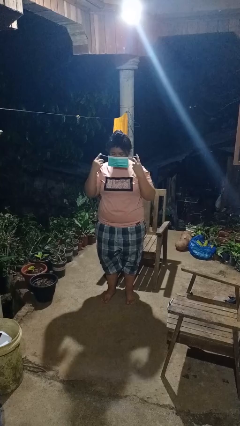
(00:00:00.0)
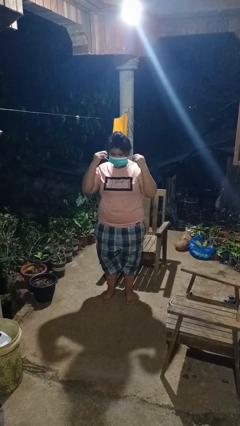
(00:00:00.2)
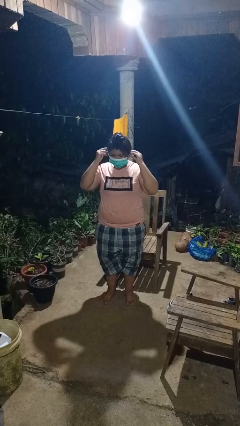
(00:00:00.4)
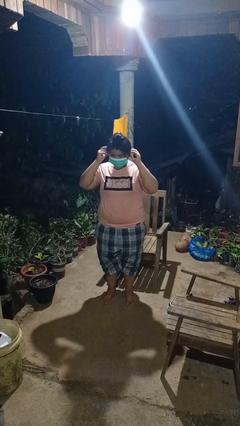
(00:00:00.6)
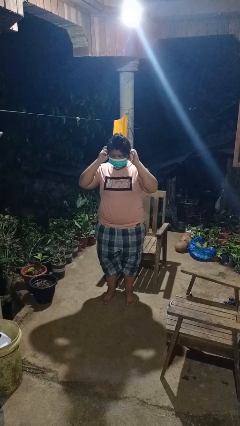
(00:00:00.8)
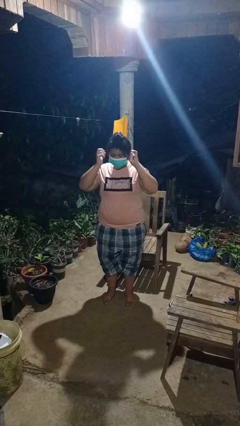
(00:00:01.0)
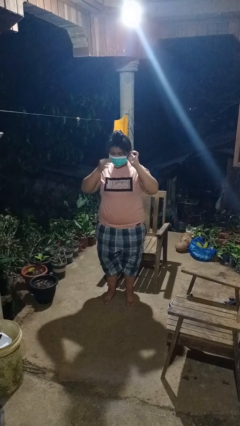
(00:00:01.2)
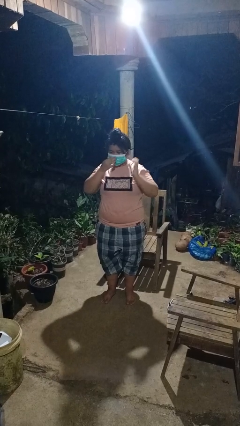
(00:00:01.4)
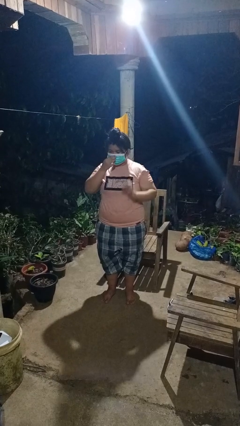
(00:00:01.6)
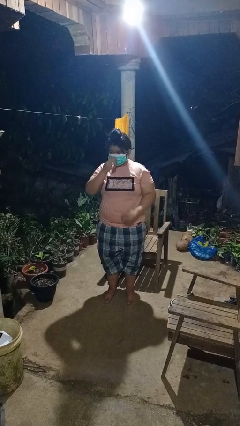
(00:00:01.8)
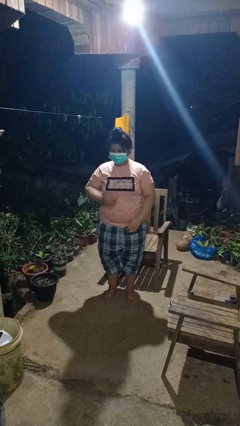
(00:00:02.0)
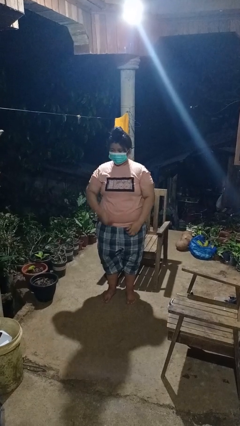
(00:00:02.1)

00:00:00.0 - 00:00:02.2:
person puts on facemask

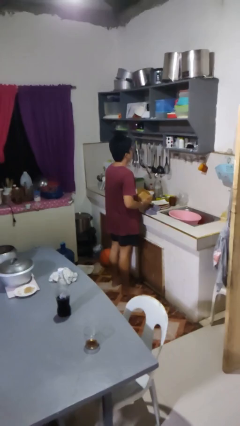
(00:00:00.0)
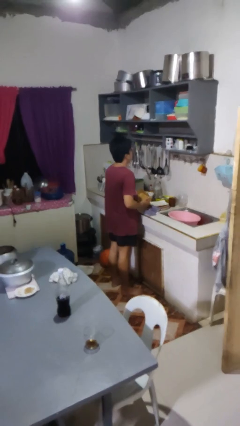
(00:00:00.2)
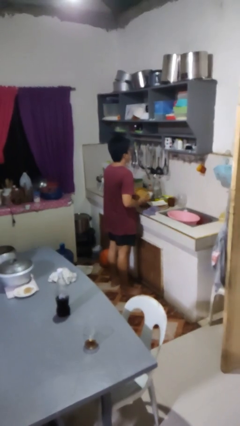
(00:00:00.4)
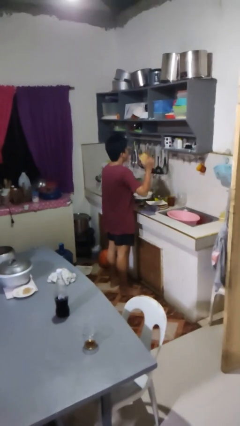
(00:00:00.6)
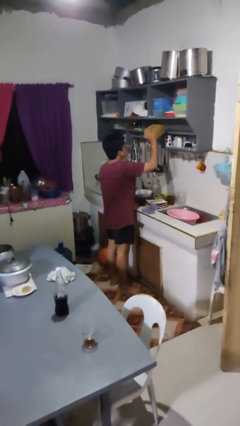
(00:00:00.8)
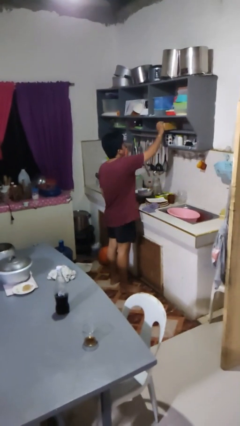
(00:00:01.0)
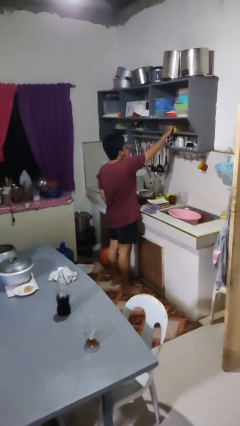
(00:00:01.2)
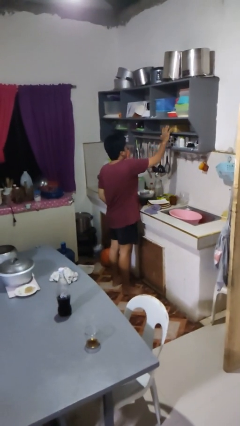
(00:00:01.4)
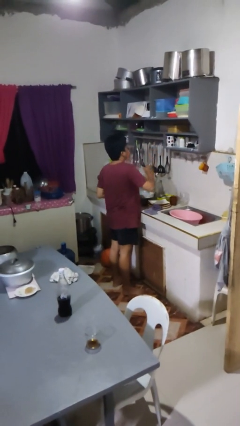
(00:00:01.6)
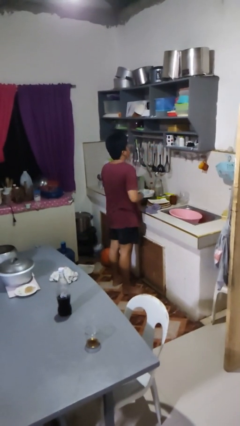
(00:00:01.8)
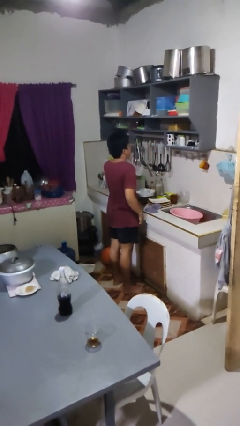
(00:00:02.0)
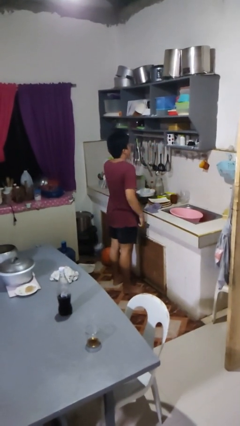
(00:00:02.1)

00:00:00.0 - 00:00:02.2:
person puts object in cabinet

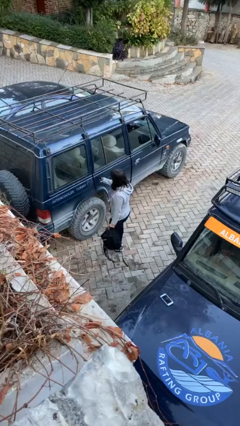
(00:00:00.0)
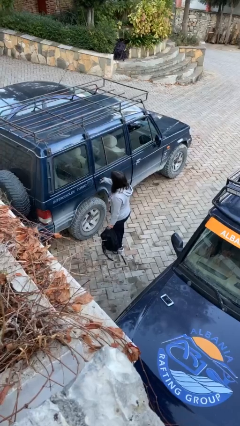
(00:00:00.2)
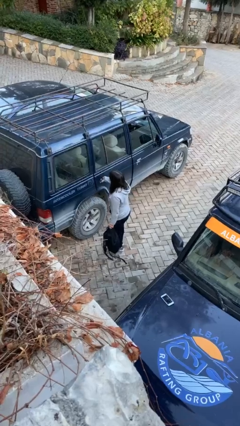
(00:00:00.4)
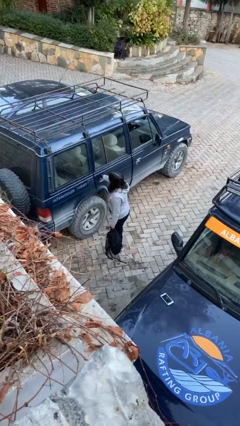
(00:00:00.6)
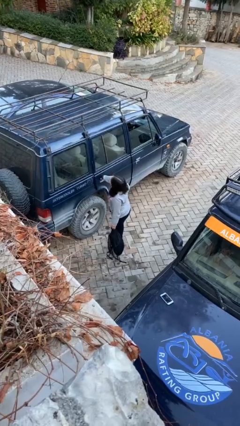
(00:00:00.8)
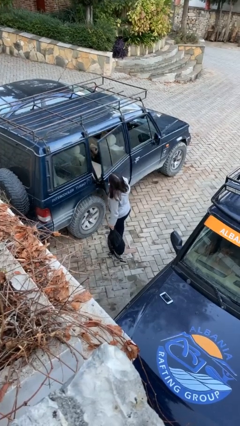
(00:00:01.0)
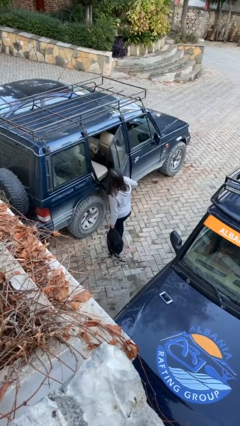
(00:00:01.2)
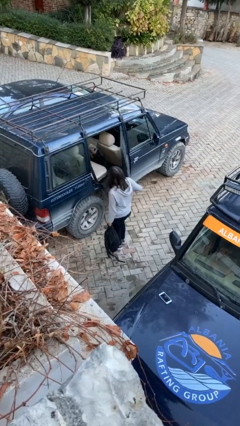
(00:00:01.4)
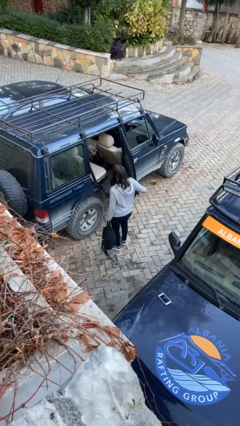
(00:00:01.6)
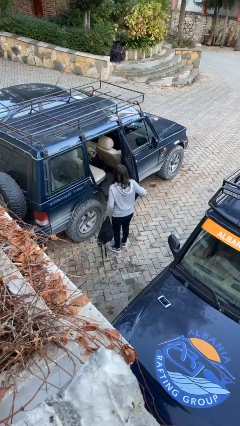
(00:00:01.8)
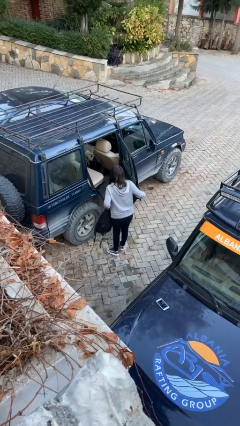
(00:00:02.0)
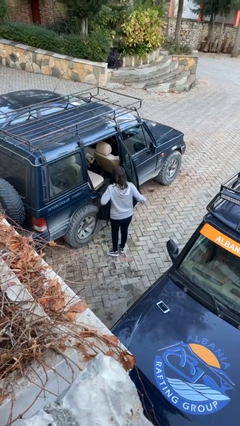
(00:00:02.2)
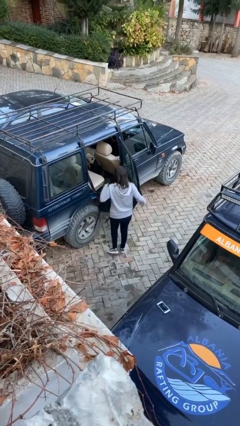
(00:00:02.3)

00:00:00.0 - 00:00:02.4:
person opens car door

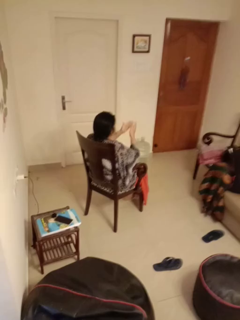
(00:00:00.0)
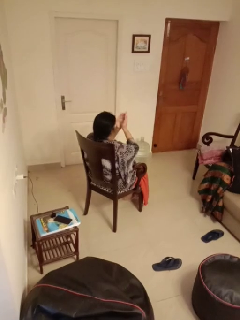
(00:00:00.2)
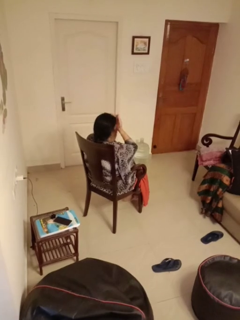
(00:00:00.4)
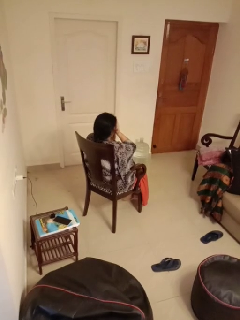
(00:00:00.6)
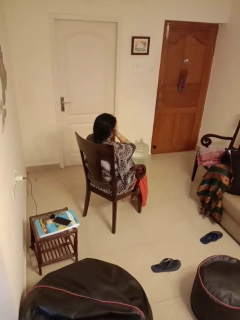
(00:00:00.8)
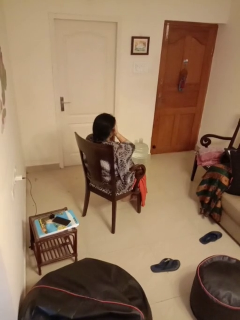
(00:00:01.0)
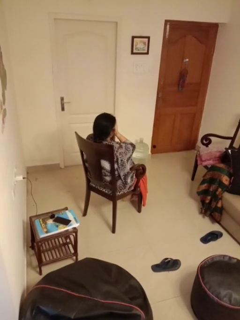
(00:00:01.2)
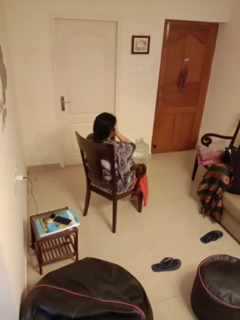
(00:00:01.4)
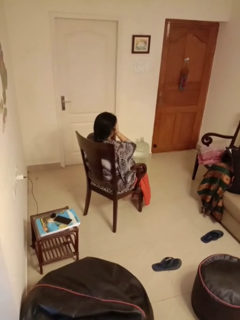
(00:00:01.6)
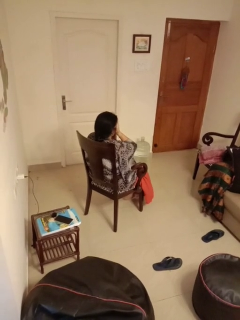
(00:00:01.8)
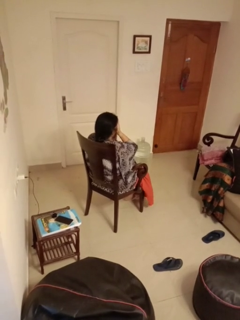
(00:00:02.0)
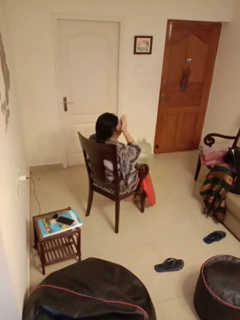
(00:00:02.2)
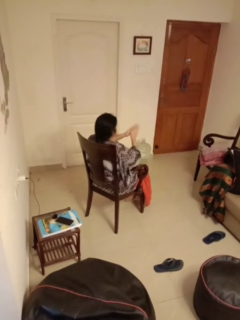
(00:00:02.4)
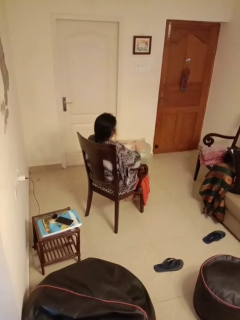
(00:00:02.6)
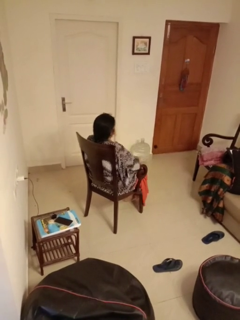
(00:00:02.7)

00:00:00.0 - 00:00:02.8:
person covers face with hands

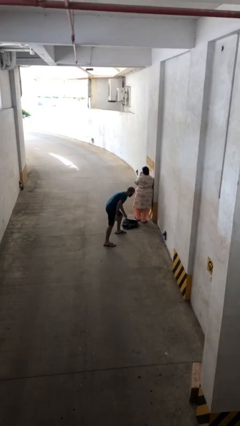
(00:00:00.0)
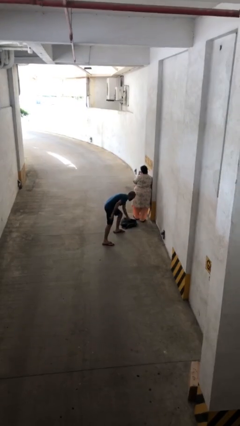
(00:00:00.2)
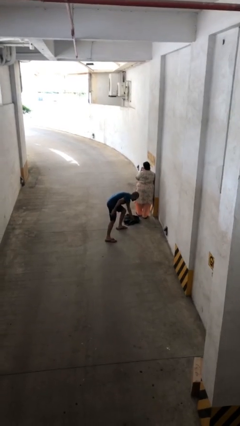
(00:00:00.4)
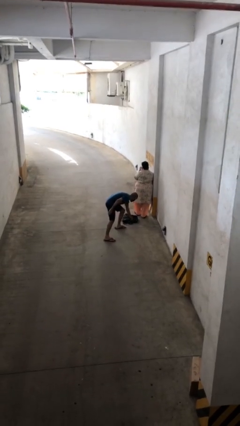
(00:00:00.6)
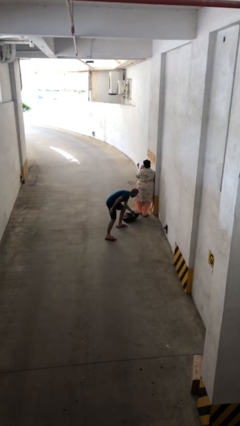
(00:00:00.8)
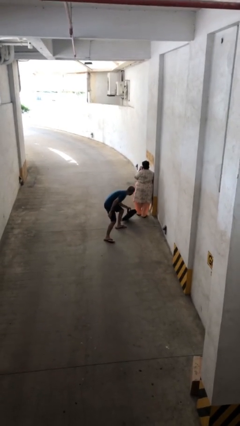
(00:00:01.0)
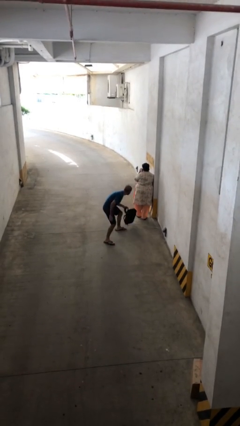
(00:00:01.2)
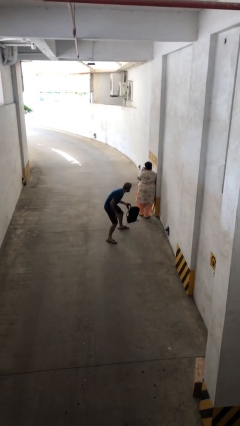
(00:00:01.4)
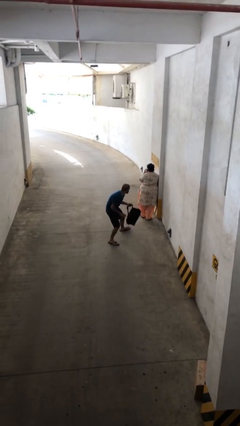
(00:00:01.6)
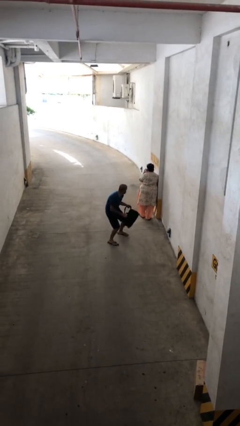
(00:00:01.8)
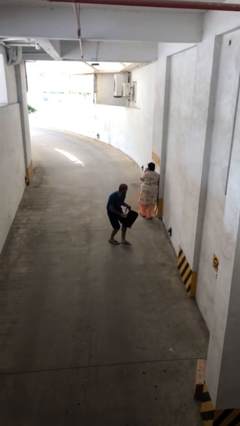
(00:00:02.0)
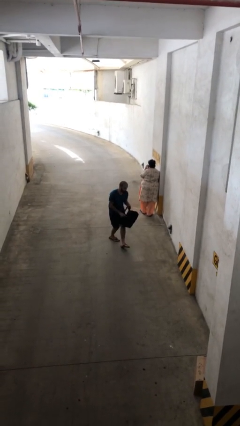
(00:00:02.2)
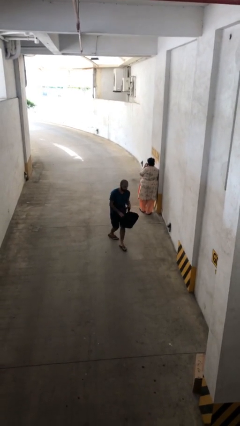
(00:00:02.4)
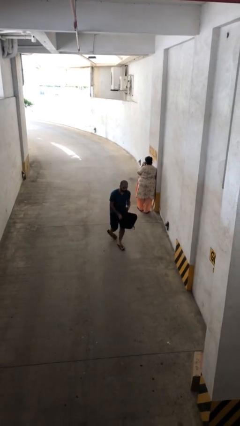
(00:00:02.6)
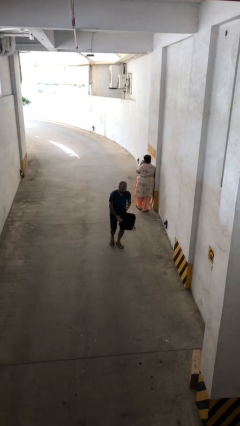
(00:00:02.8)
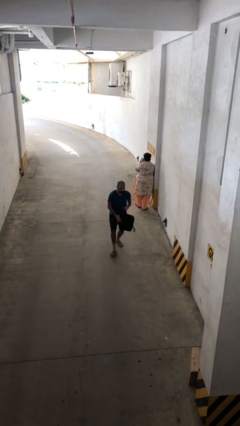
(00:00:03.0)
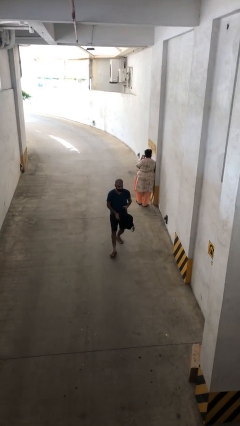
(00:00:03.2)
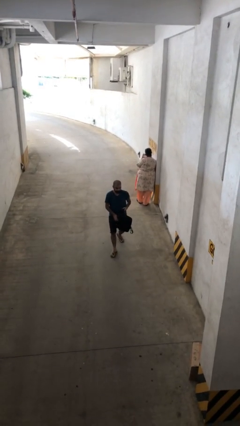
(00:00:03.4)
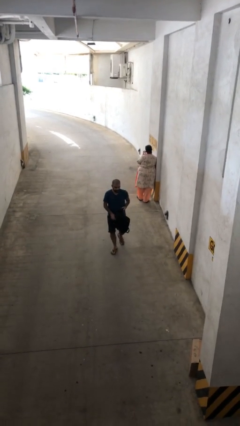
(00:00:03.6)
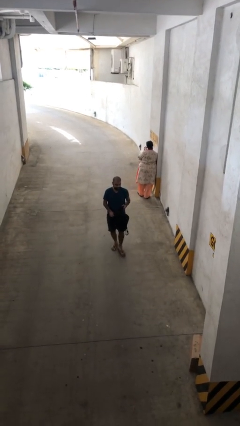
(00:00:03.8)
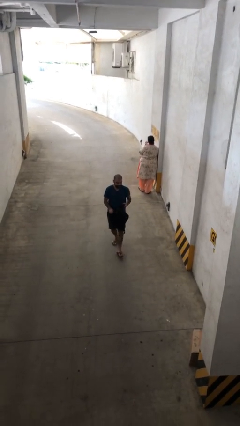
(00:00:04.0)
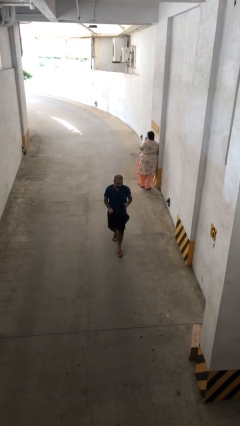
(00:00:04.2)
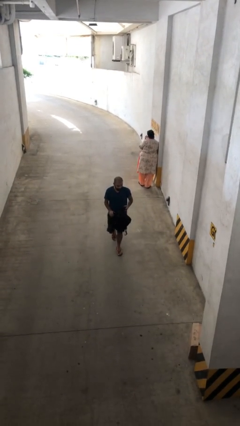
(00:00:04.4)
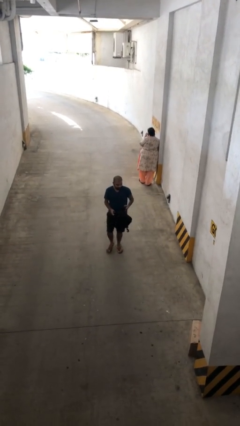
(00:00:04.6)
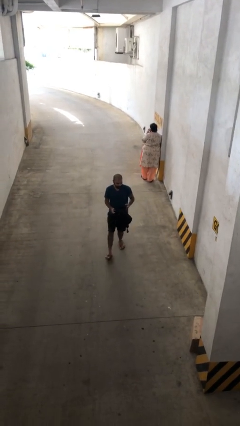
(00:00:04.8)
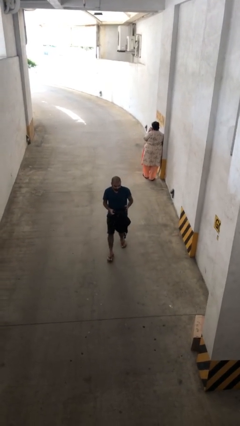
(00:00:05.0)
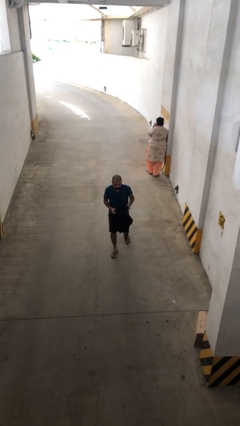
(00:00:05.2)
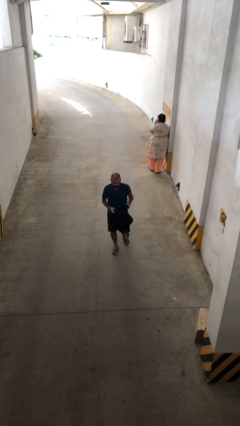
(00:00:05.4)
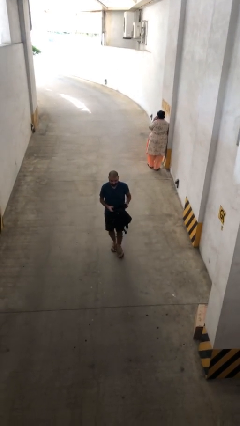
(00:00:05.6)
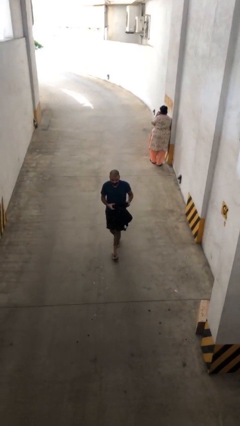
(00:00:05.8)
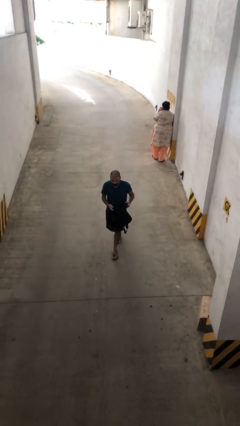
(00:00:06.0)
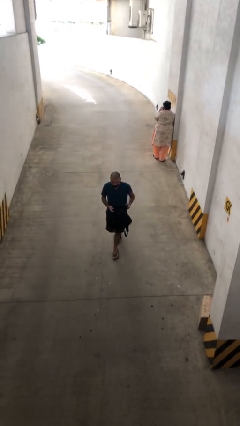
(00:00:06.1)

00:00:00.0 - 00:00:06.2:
person steals object from person

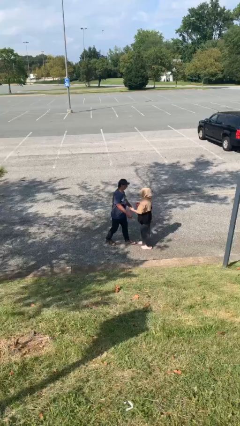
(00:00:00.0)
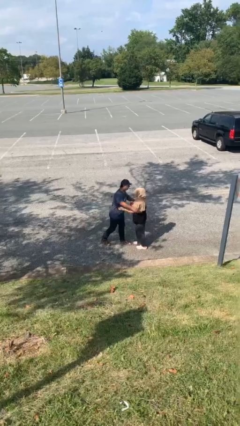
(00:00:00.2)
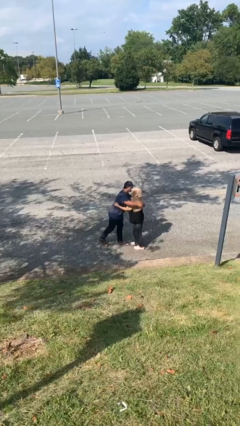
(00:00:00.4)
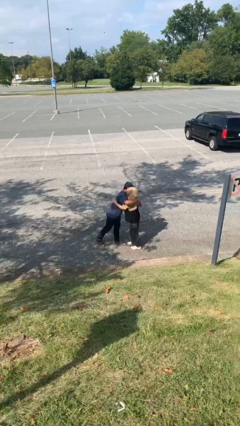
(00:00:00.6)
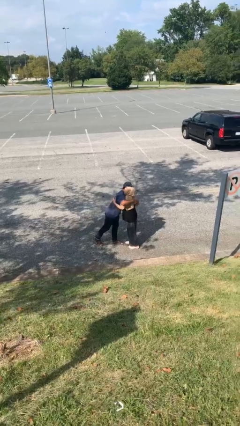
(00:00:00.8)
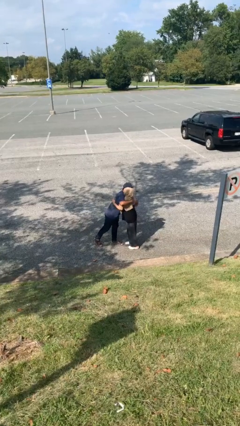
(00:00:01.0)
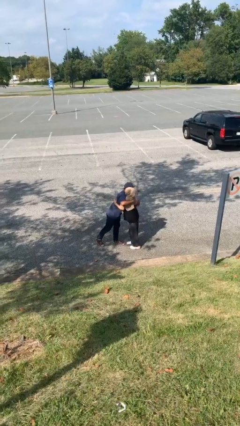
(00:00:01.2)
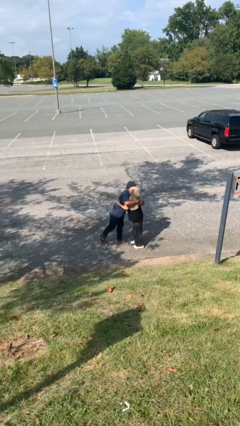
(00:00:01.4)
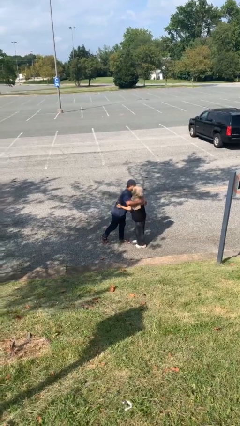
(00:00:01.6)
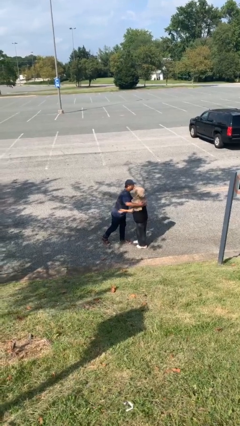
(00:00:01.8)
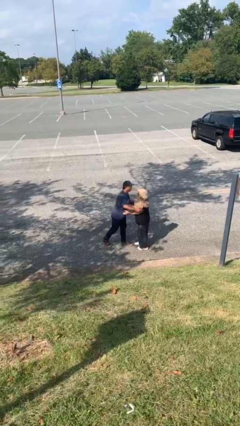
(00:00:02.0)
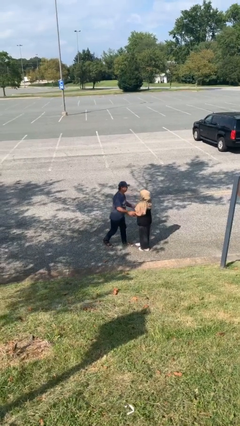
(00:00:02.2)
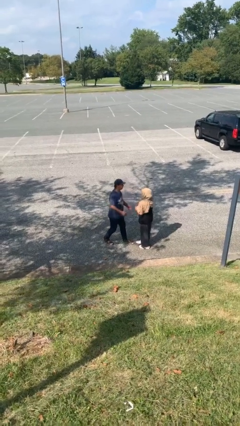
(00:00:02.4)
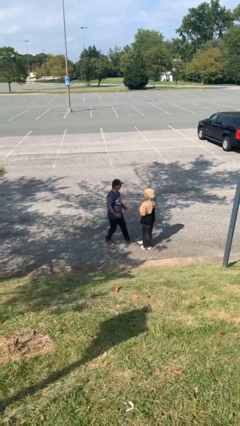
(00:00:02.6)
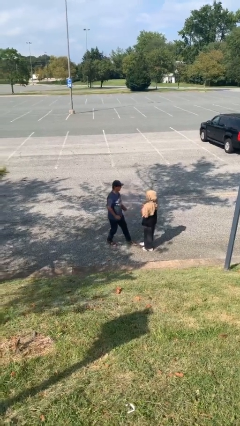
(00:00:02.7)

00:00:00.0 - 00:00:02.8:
person embraces person
